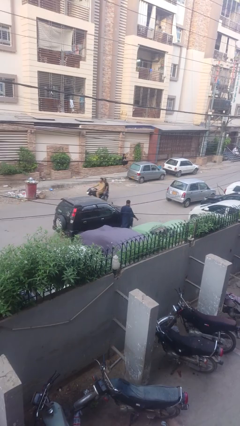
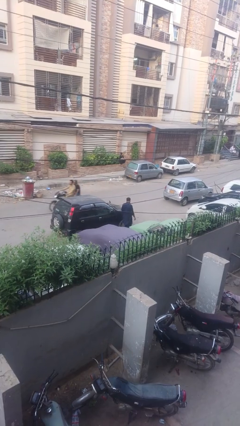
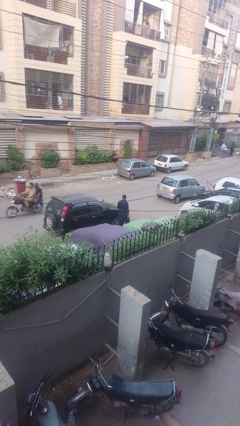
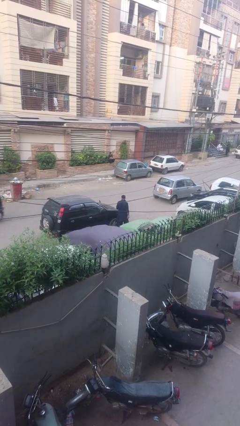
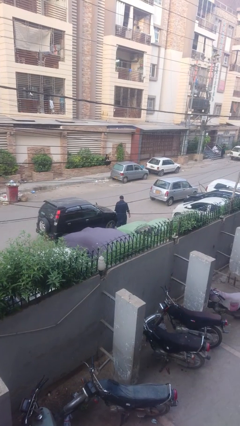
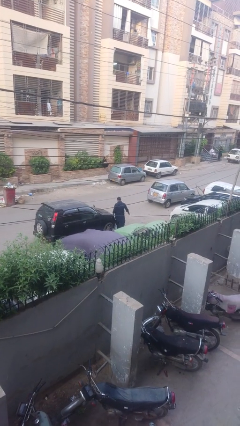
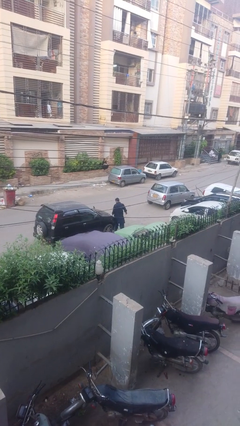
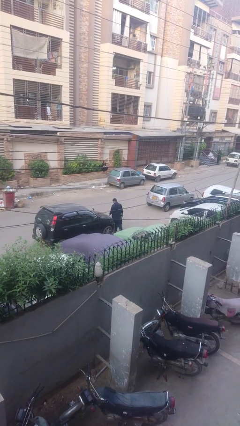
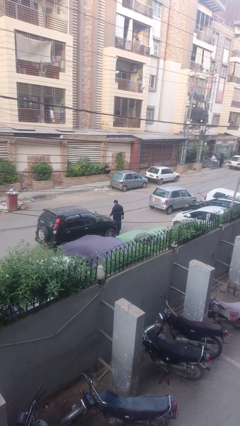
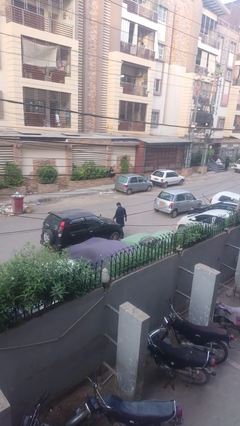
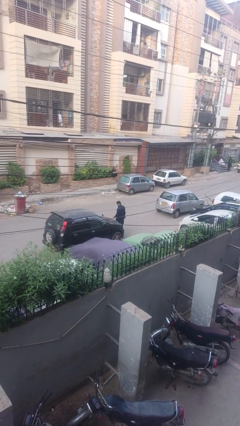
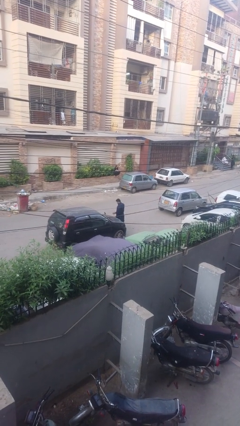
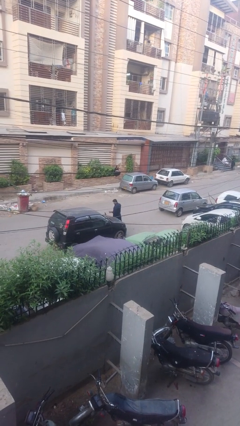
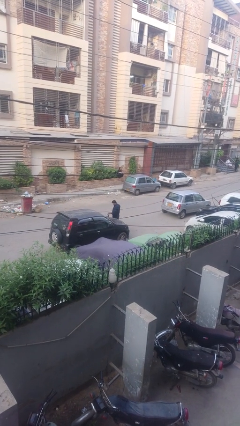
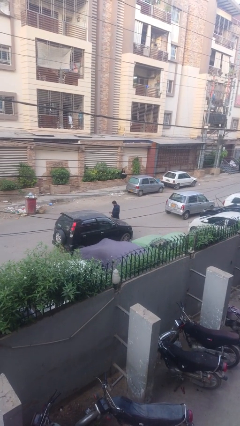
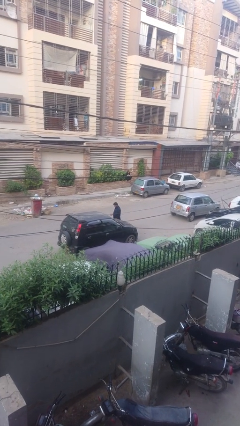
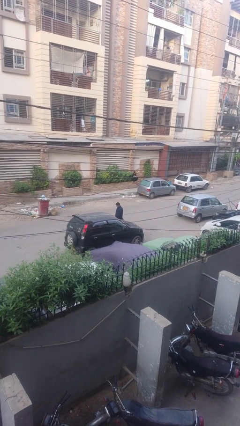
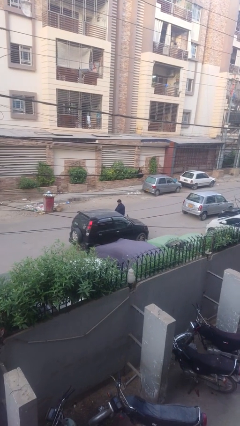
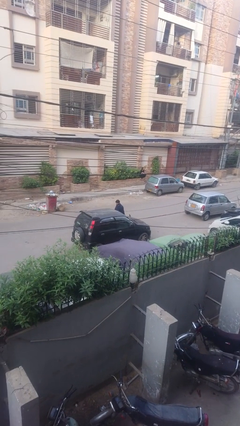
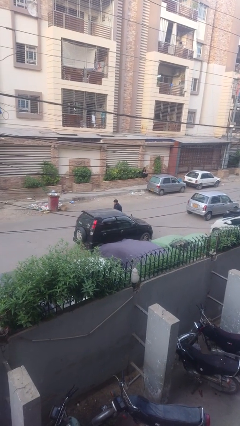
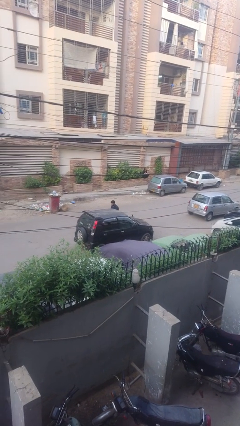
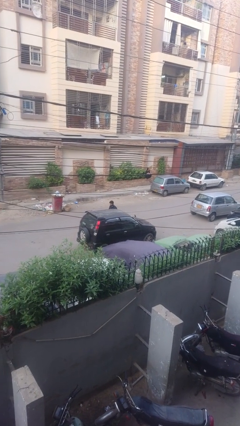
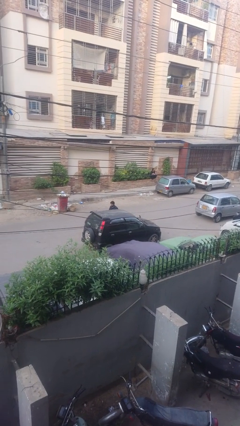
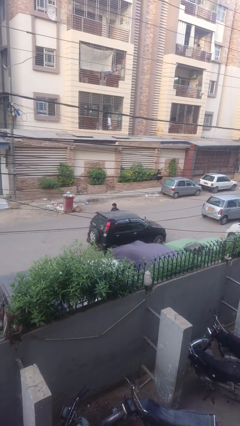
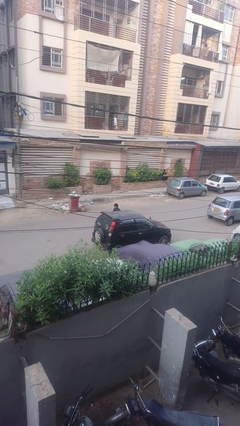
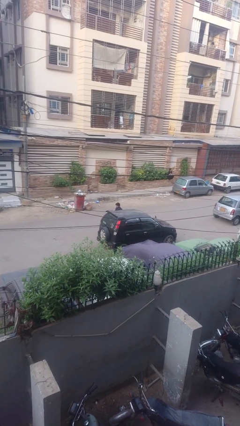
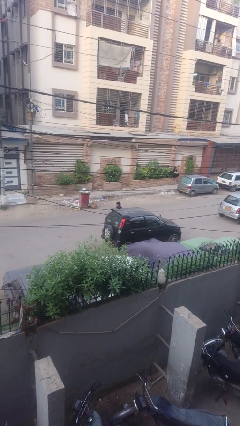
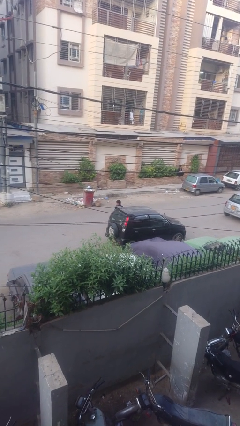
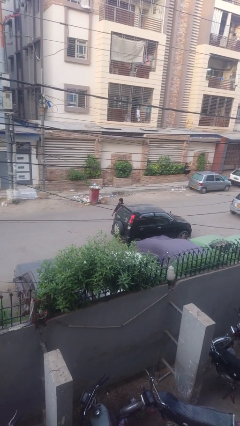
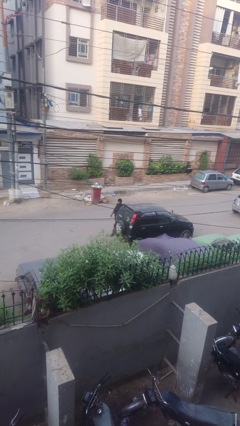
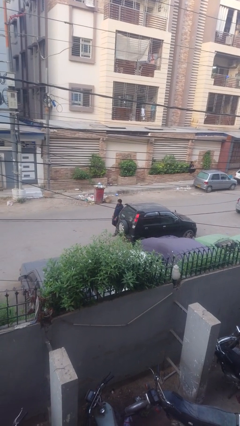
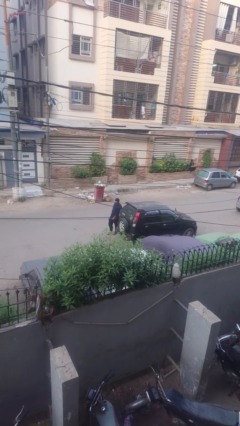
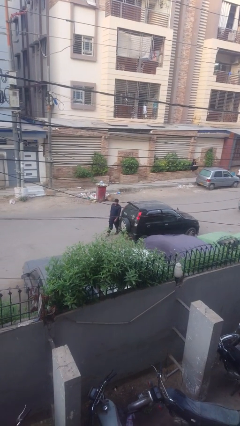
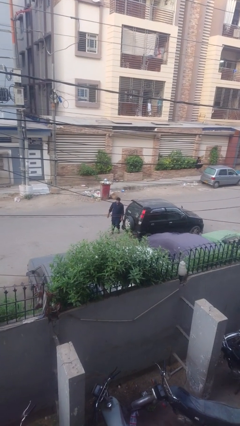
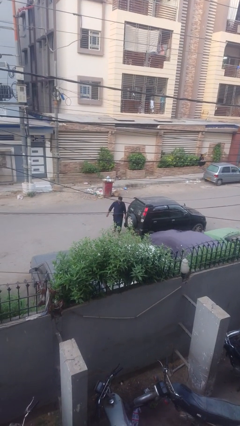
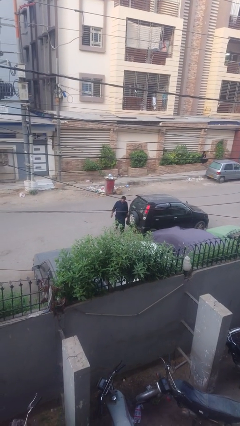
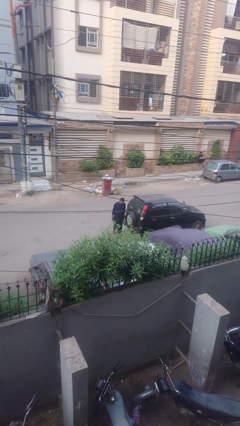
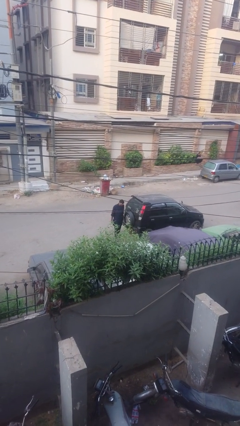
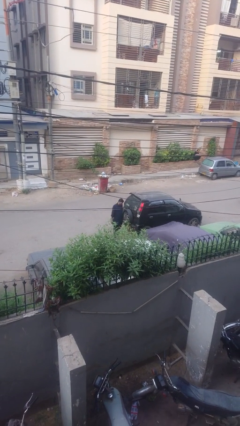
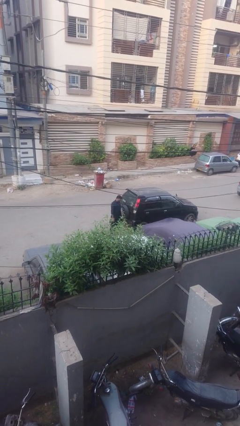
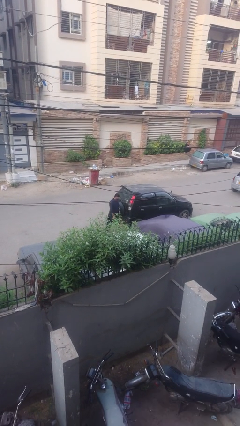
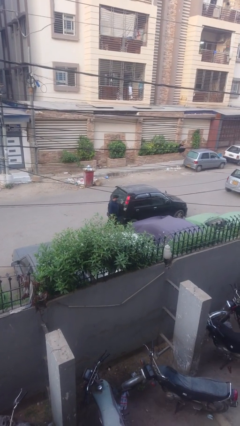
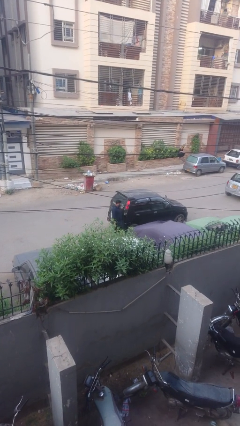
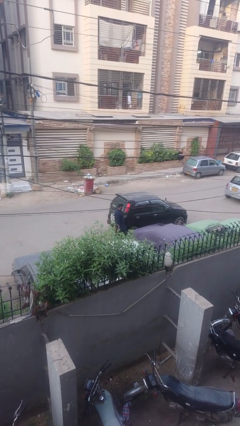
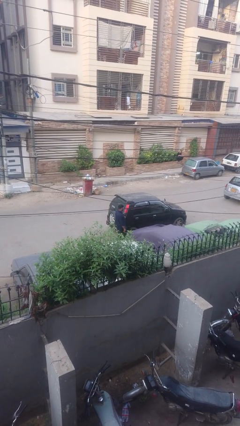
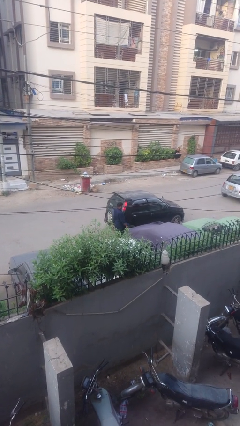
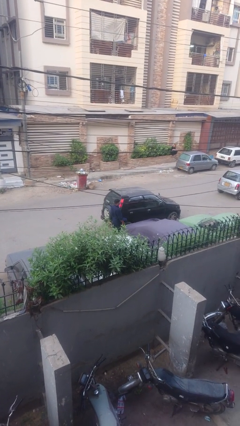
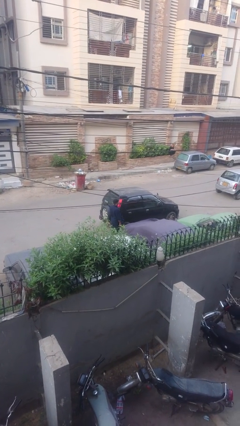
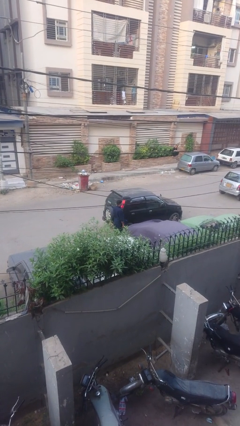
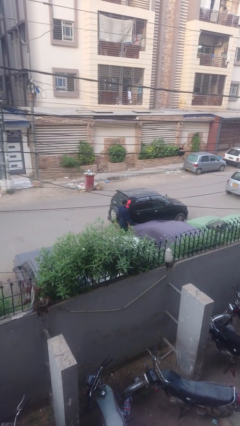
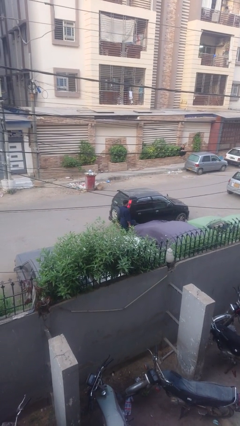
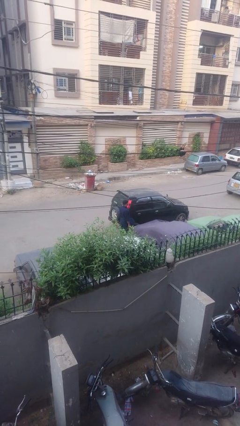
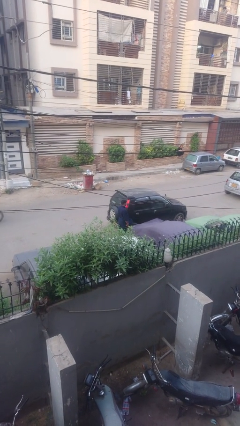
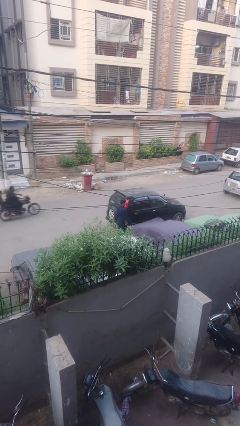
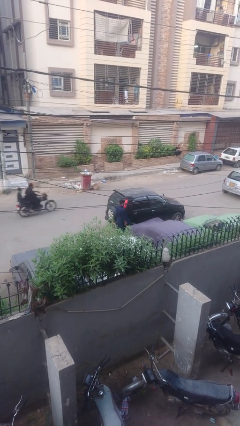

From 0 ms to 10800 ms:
person walks around car

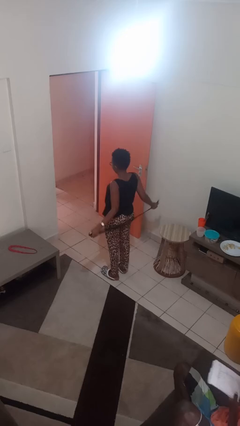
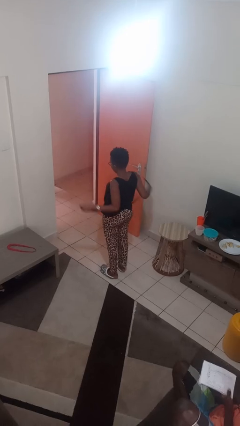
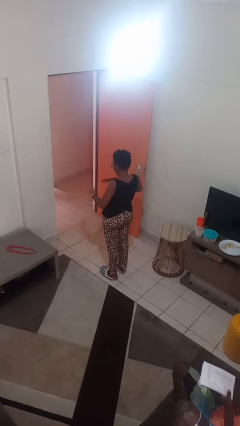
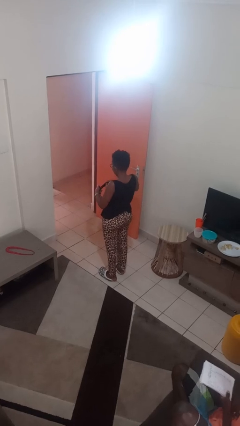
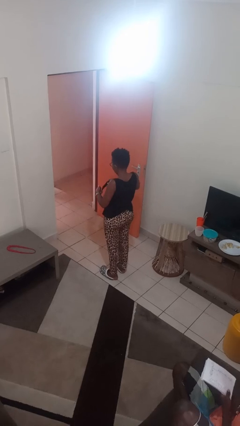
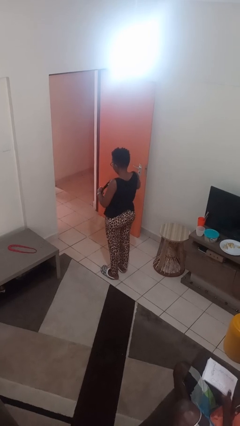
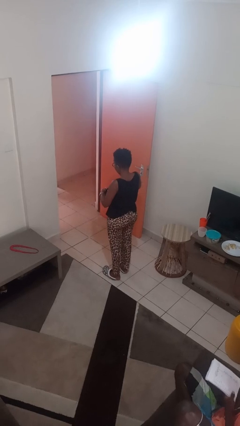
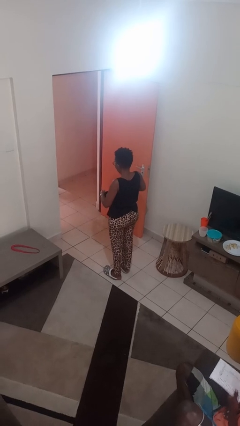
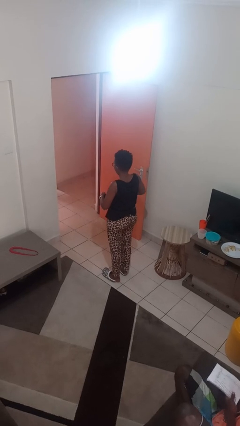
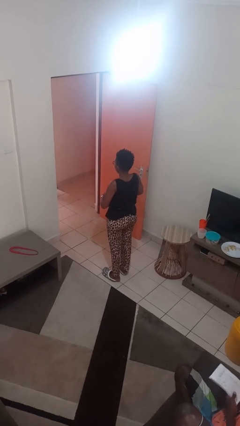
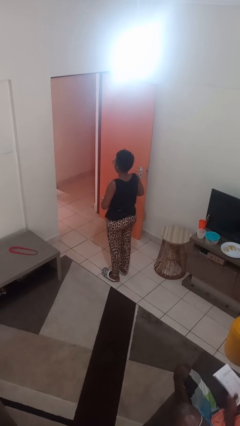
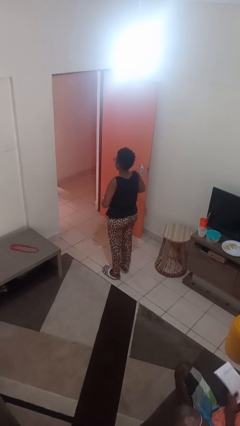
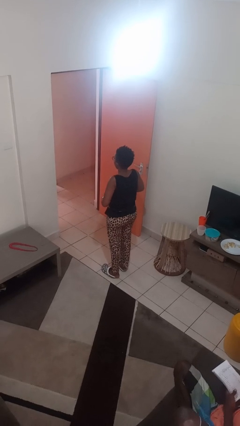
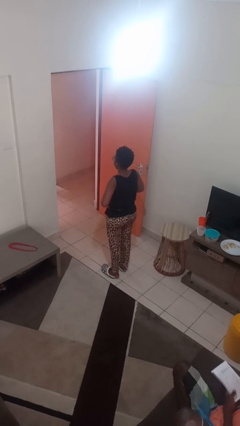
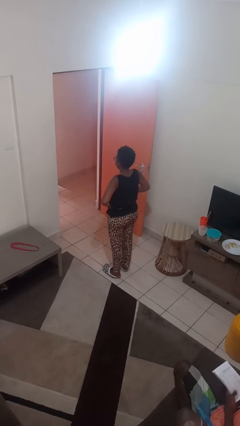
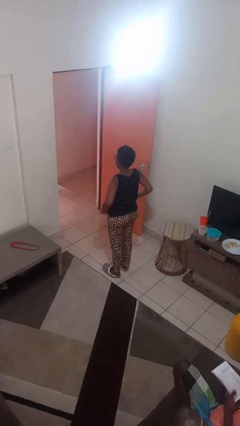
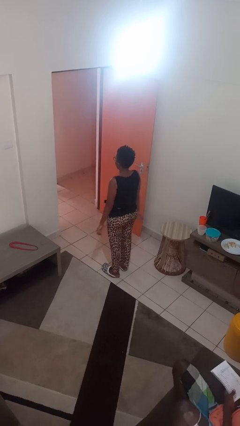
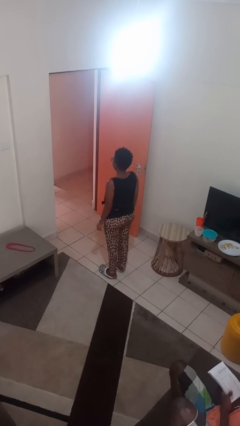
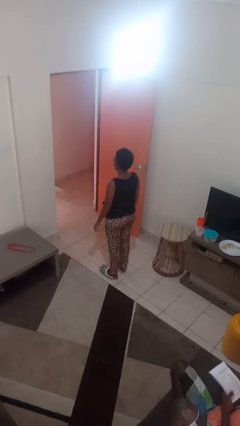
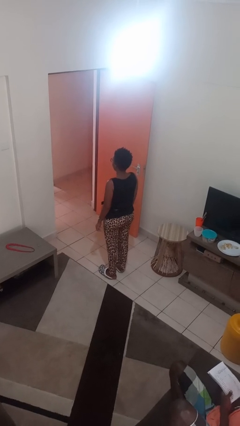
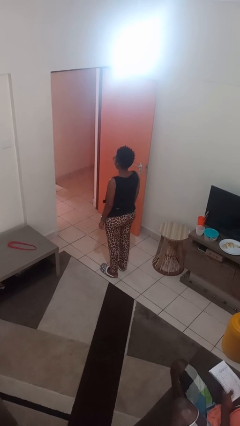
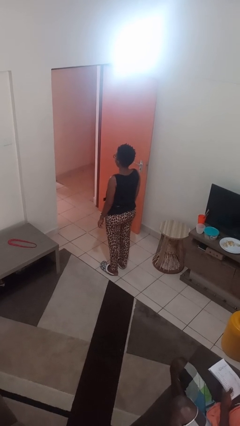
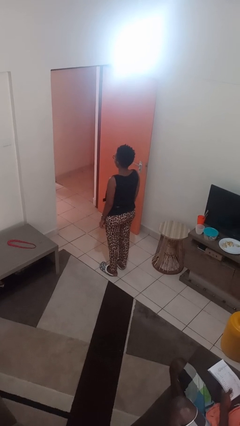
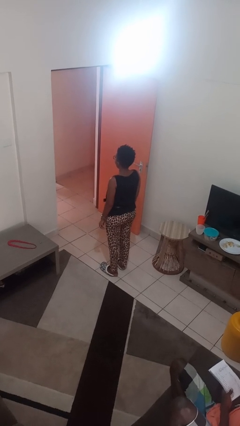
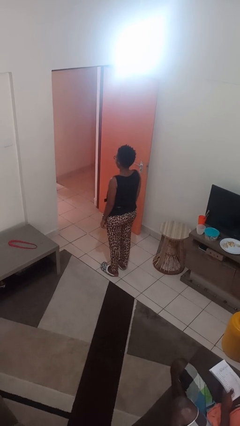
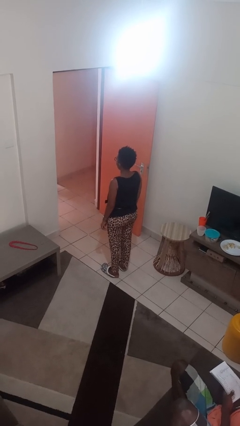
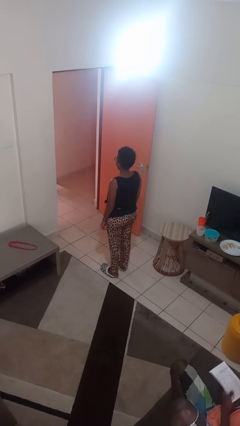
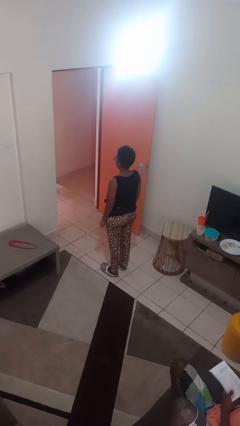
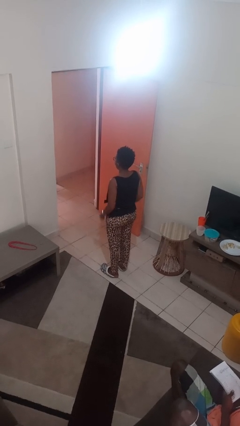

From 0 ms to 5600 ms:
person puts on belt

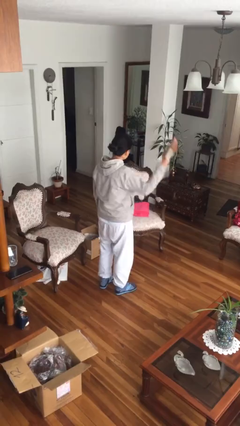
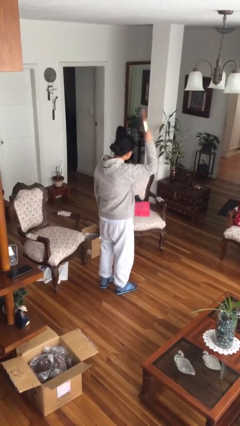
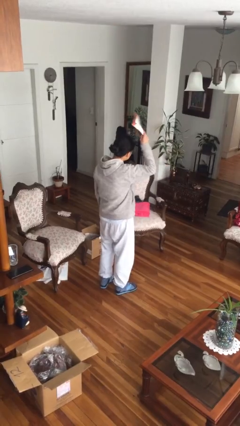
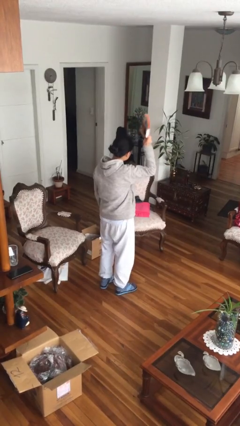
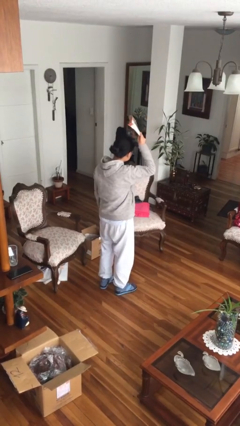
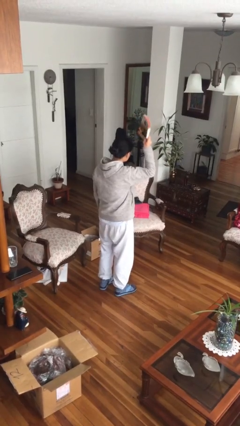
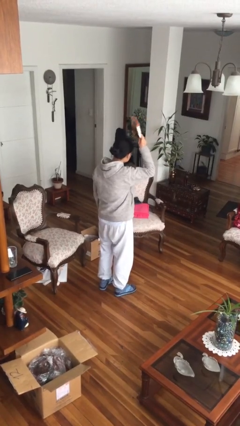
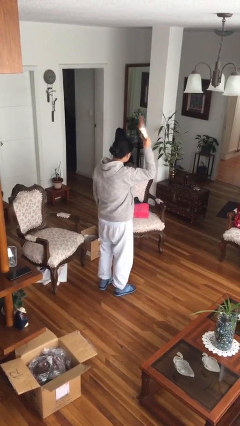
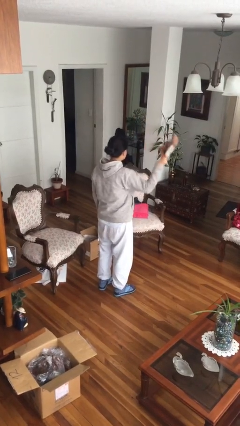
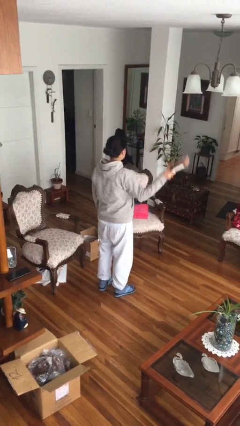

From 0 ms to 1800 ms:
person holds object above head
